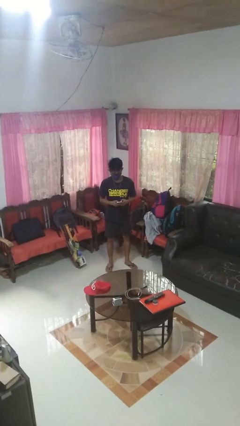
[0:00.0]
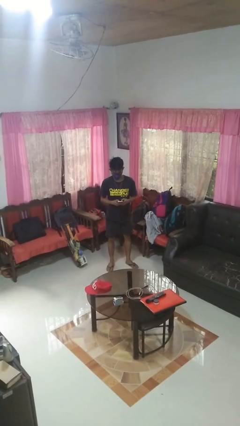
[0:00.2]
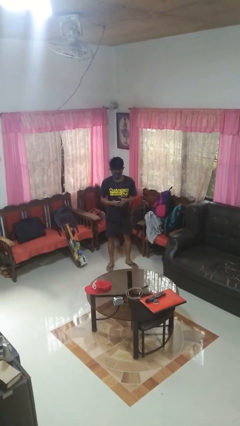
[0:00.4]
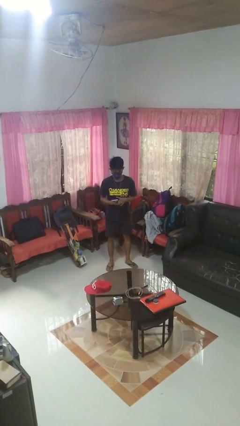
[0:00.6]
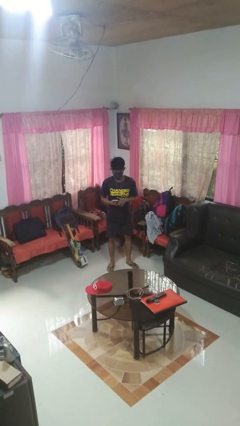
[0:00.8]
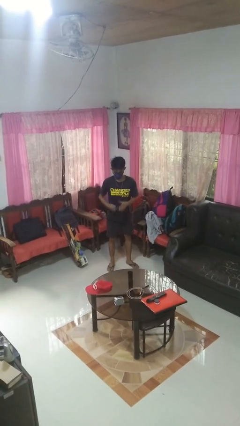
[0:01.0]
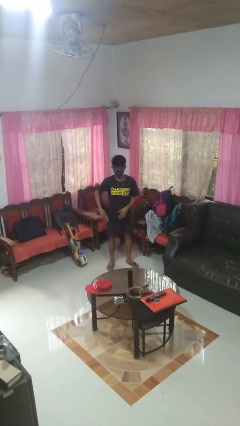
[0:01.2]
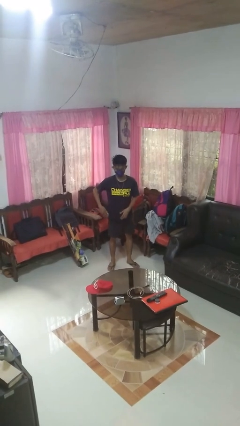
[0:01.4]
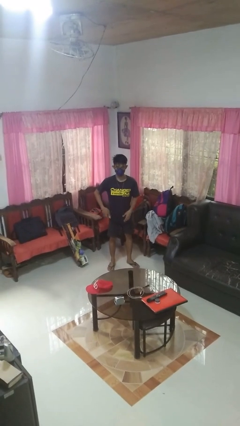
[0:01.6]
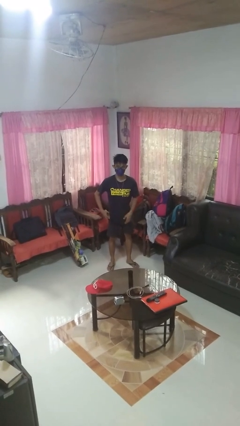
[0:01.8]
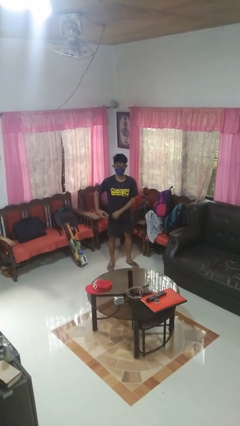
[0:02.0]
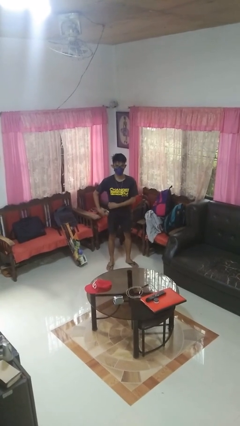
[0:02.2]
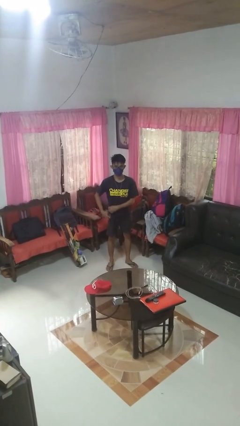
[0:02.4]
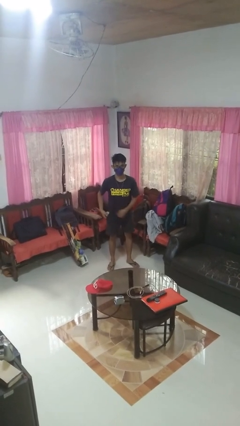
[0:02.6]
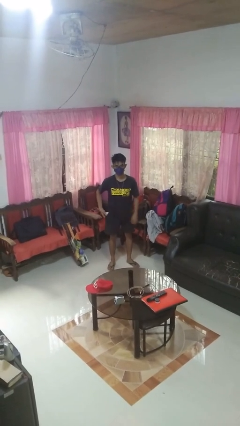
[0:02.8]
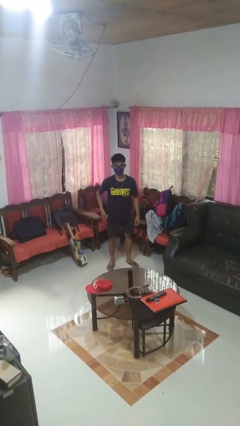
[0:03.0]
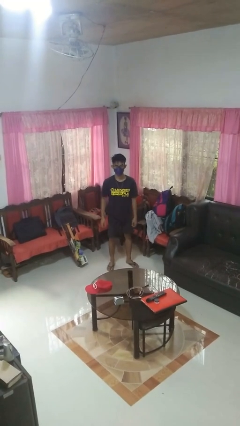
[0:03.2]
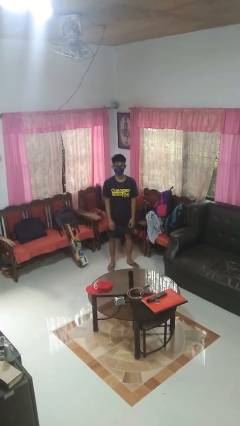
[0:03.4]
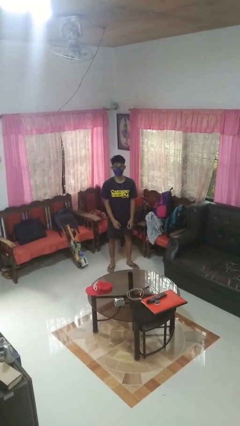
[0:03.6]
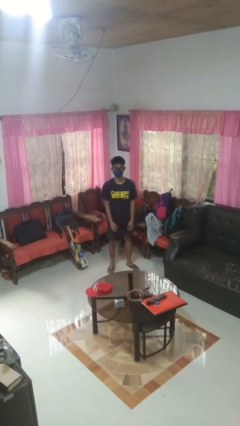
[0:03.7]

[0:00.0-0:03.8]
person puts phone into pocket

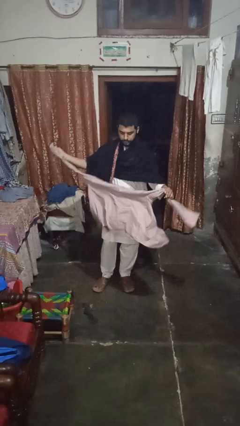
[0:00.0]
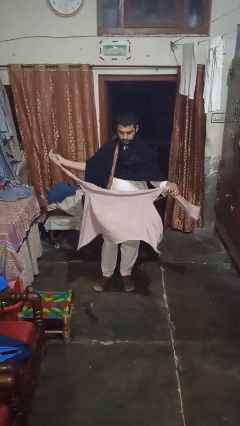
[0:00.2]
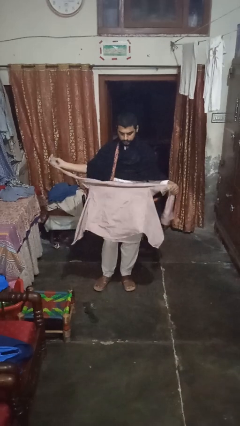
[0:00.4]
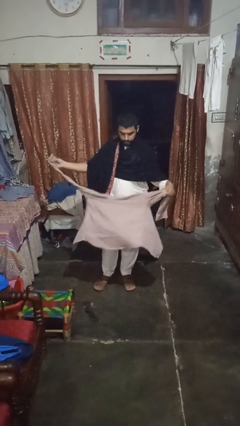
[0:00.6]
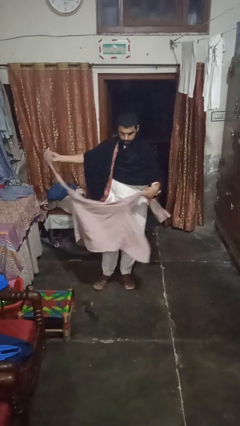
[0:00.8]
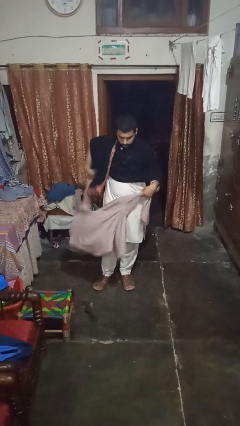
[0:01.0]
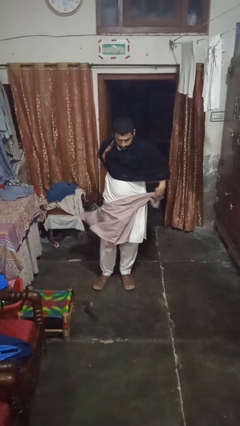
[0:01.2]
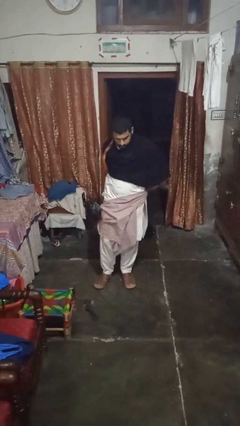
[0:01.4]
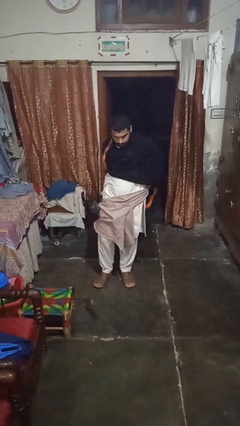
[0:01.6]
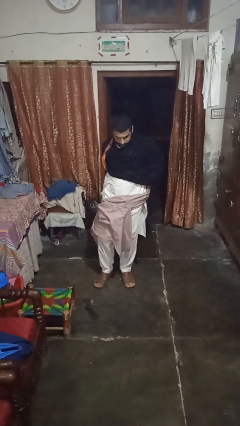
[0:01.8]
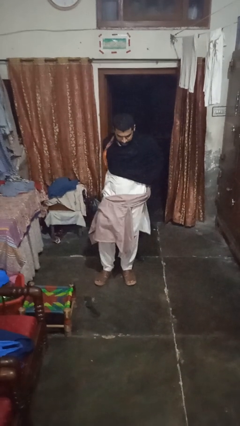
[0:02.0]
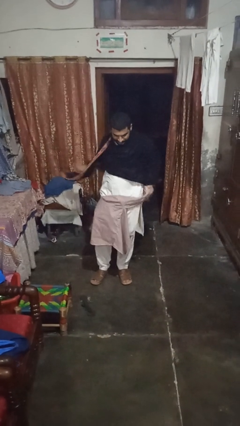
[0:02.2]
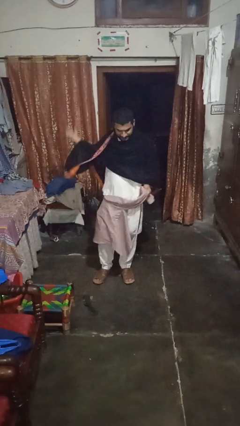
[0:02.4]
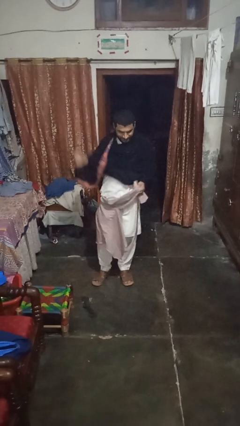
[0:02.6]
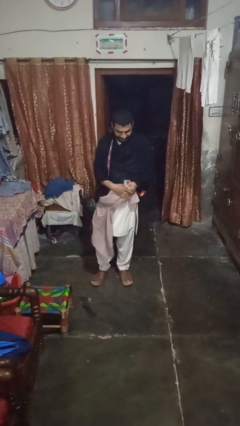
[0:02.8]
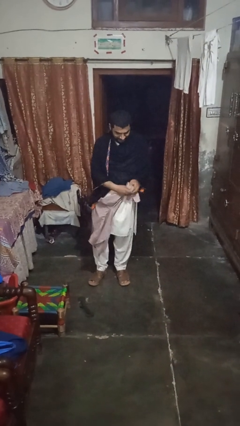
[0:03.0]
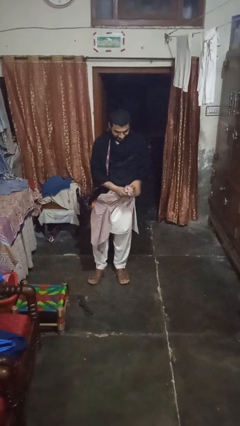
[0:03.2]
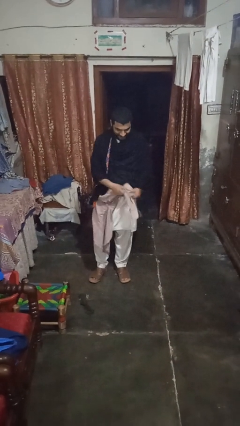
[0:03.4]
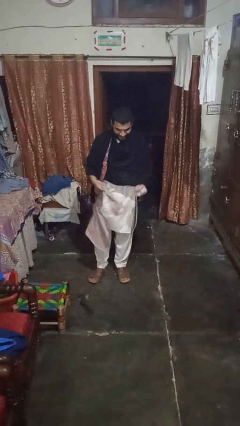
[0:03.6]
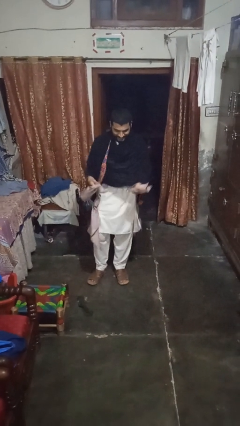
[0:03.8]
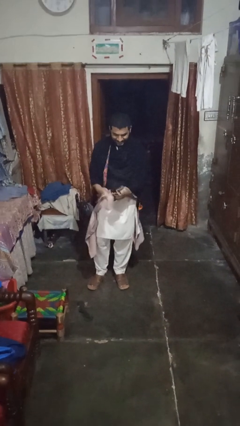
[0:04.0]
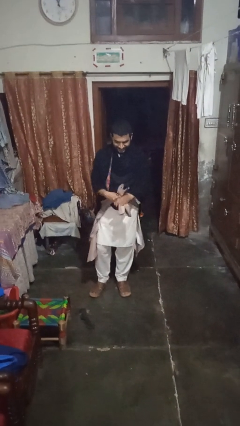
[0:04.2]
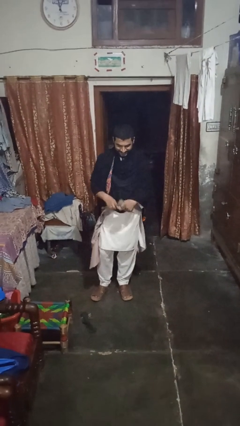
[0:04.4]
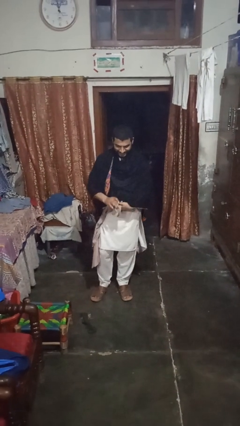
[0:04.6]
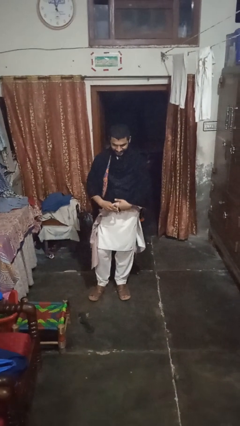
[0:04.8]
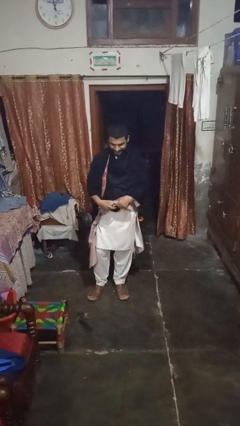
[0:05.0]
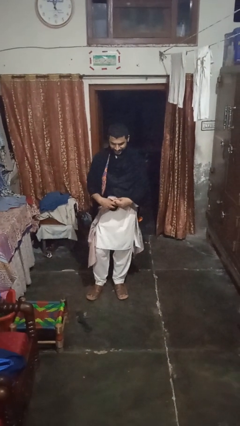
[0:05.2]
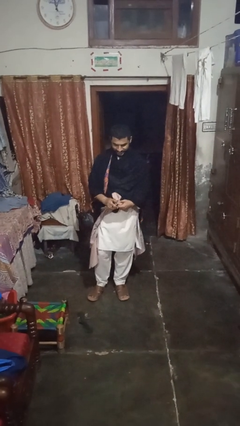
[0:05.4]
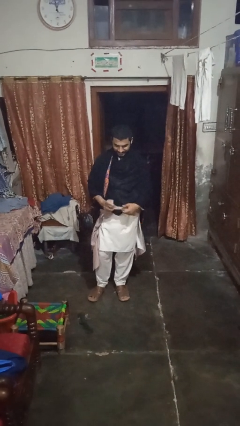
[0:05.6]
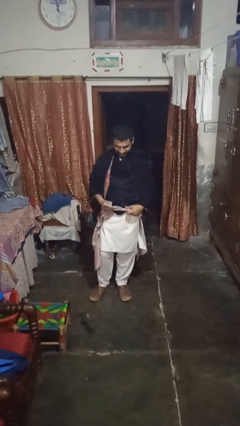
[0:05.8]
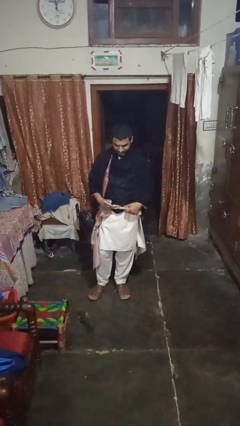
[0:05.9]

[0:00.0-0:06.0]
person ties jacket around waist

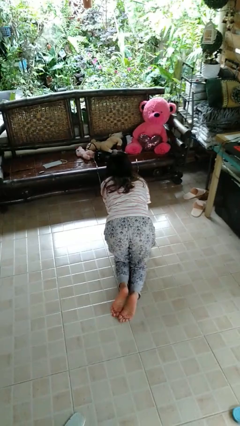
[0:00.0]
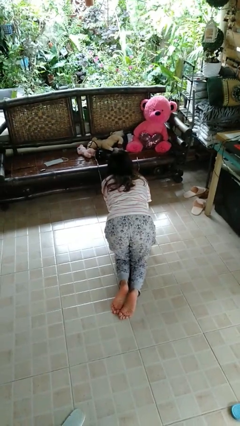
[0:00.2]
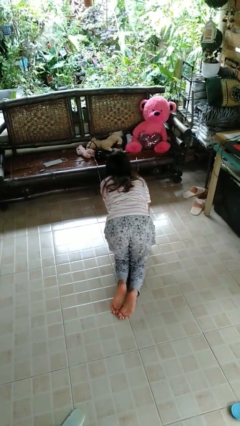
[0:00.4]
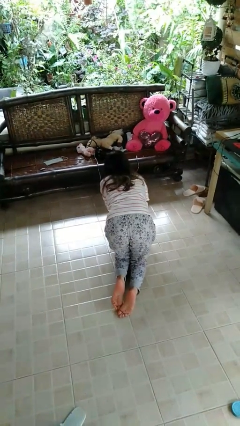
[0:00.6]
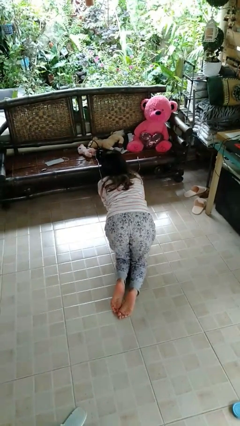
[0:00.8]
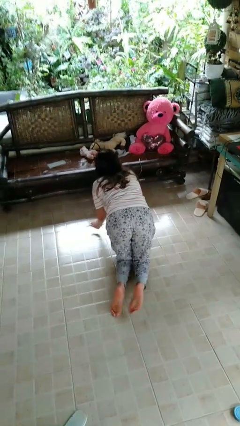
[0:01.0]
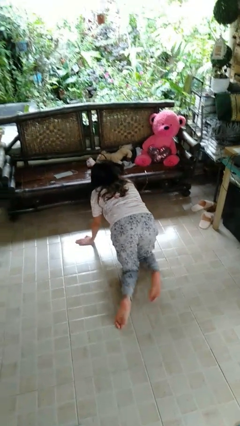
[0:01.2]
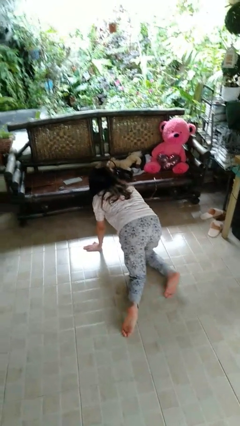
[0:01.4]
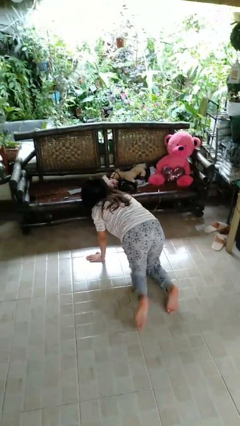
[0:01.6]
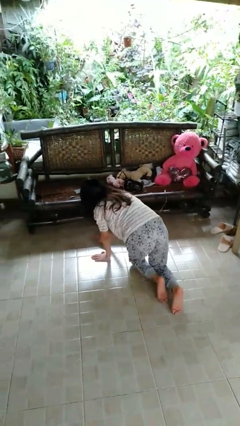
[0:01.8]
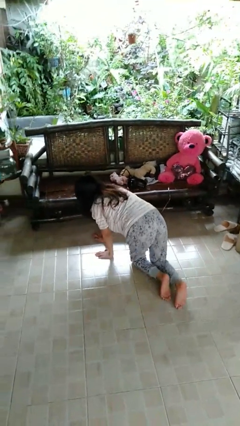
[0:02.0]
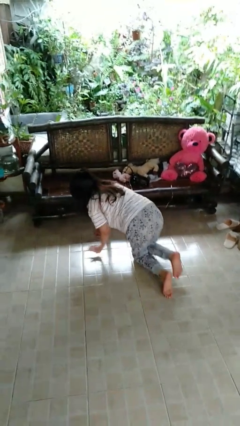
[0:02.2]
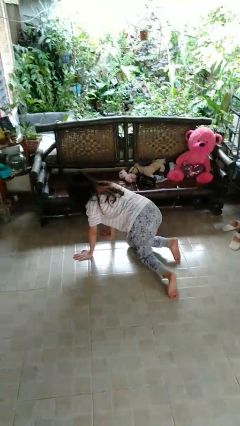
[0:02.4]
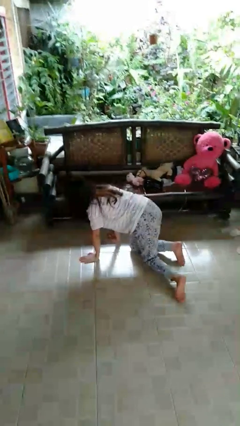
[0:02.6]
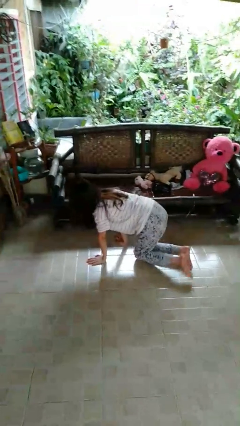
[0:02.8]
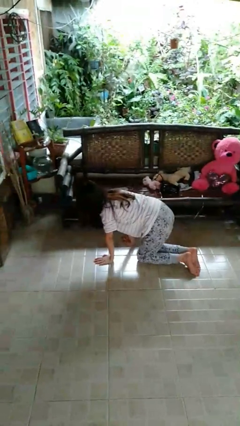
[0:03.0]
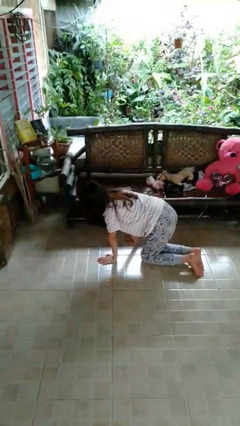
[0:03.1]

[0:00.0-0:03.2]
person crawls

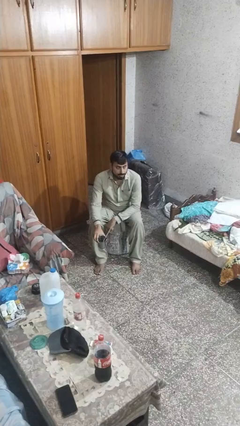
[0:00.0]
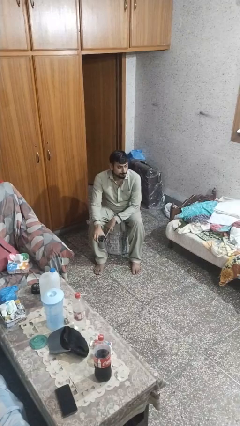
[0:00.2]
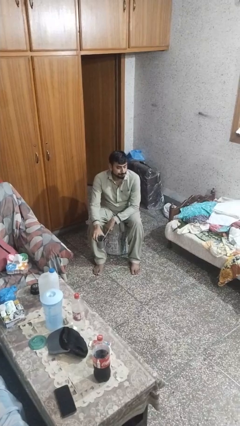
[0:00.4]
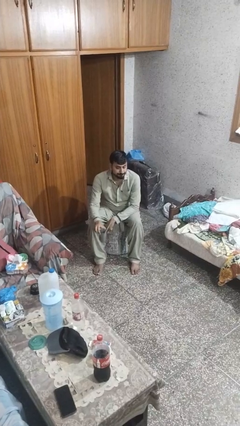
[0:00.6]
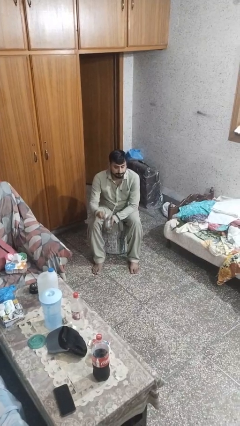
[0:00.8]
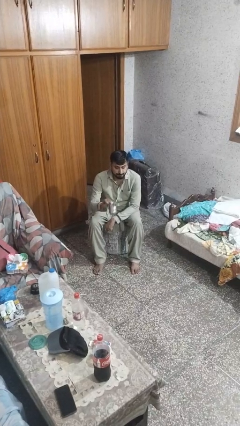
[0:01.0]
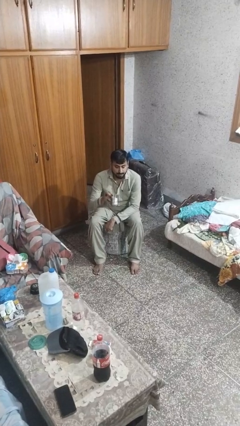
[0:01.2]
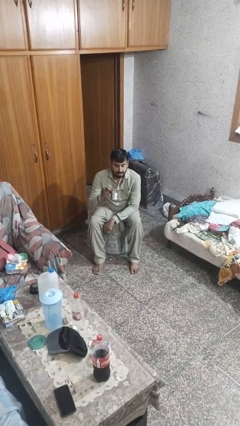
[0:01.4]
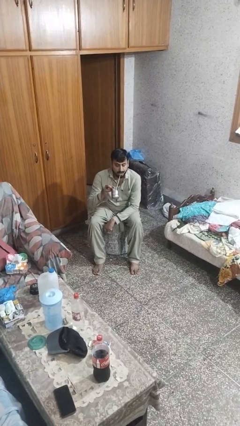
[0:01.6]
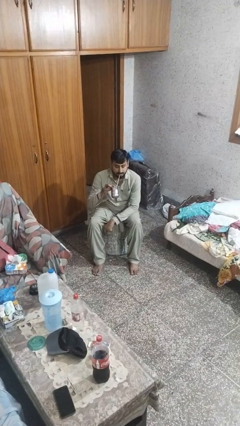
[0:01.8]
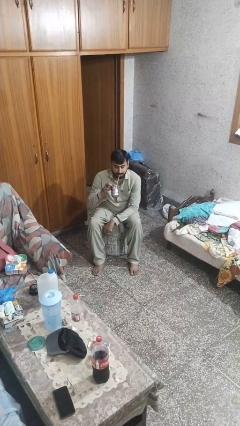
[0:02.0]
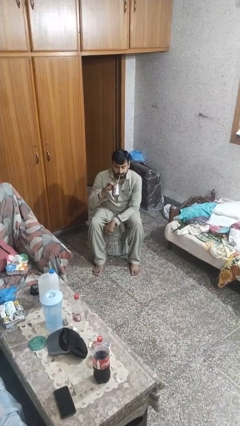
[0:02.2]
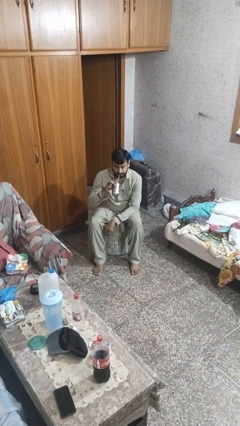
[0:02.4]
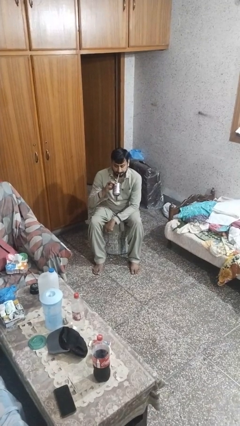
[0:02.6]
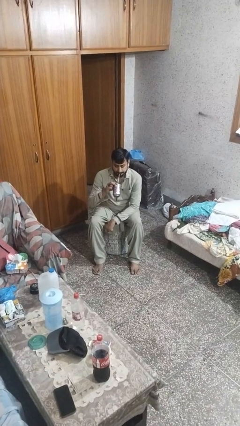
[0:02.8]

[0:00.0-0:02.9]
person drinks from straw

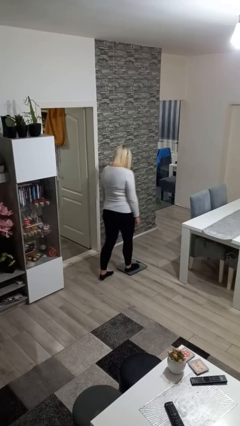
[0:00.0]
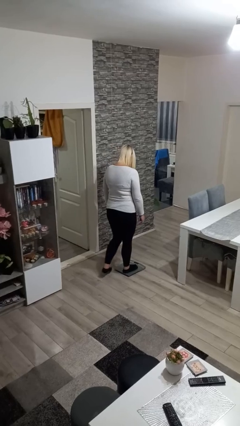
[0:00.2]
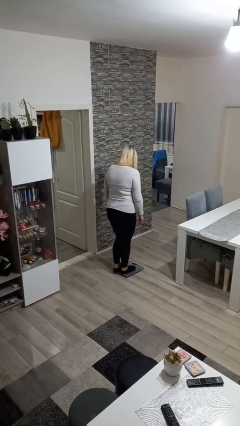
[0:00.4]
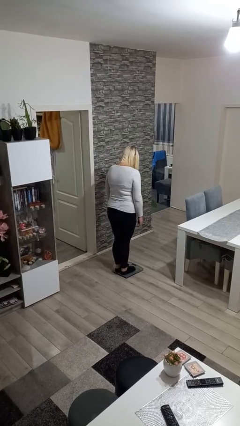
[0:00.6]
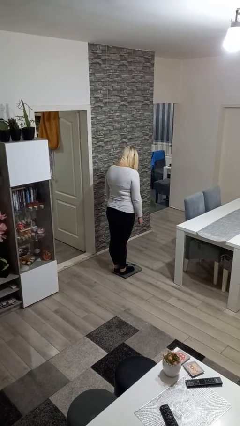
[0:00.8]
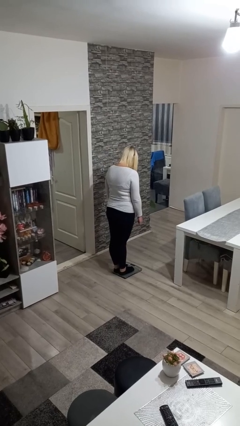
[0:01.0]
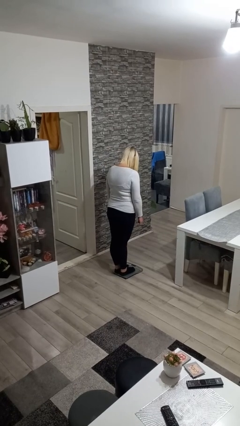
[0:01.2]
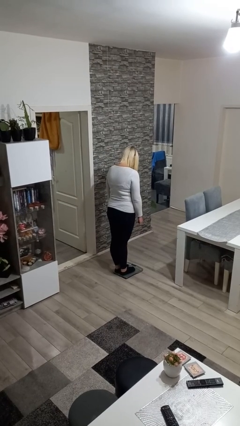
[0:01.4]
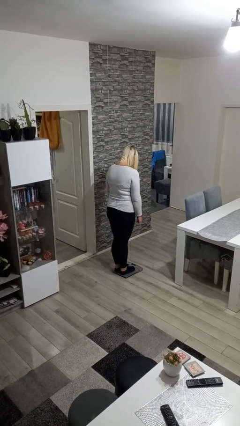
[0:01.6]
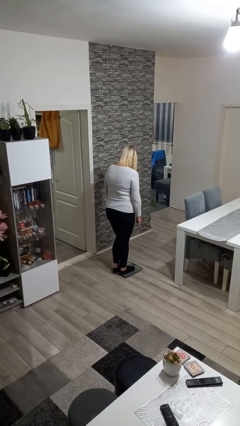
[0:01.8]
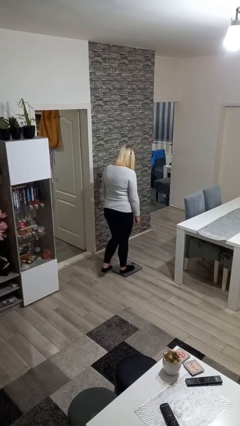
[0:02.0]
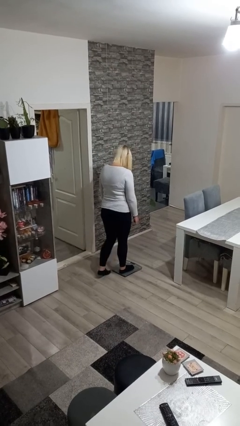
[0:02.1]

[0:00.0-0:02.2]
person uses bodyweight scale
